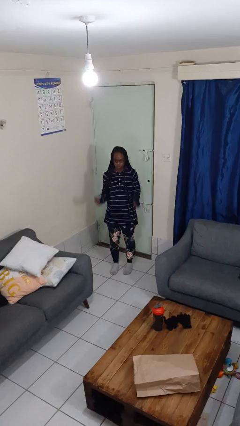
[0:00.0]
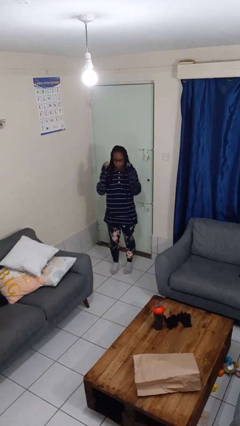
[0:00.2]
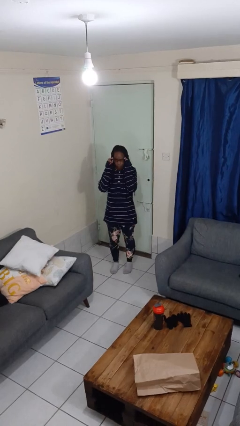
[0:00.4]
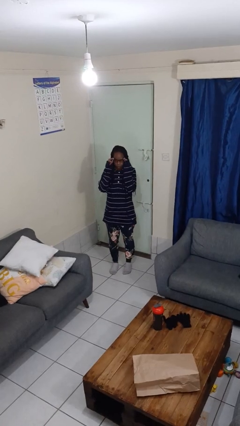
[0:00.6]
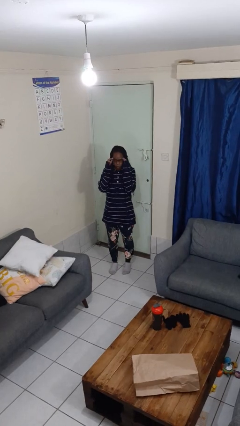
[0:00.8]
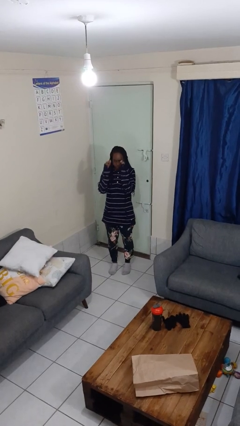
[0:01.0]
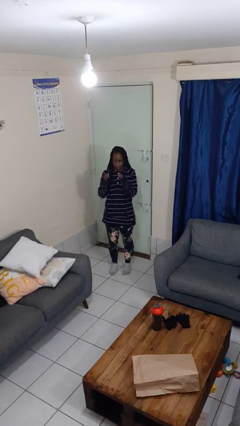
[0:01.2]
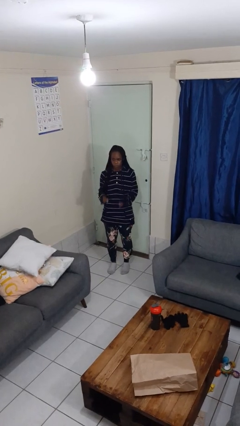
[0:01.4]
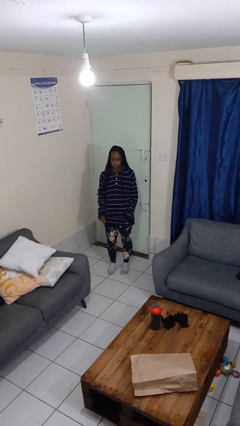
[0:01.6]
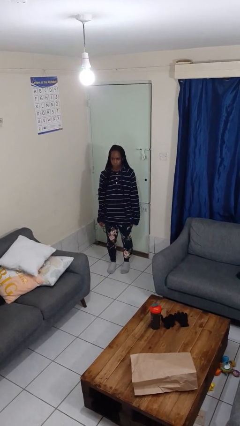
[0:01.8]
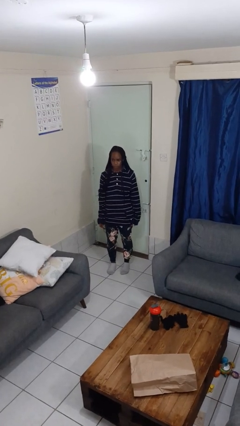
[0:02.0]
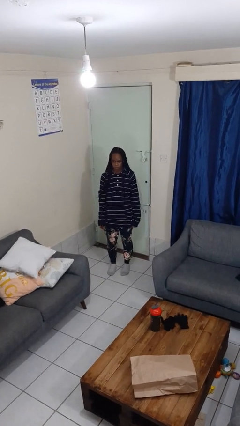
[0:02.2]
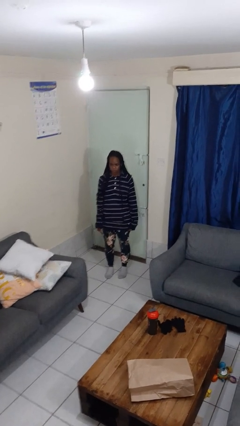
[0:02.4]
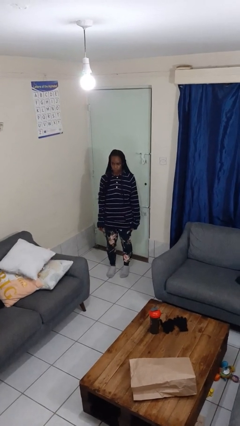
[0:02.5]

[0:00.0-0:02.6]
person takes off glasses

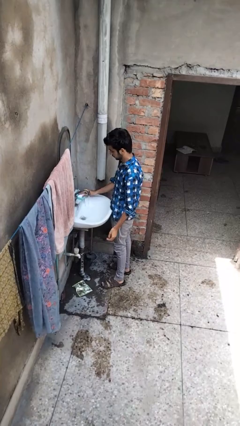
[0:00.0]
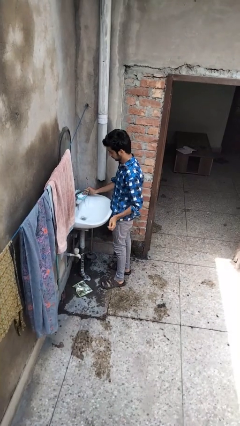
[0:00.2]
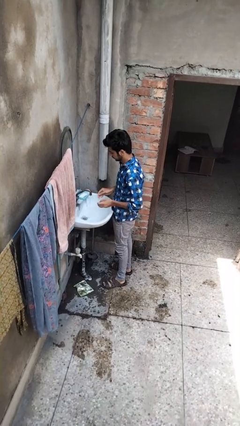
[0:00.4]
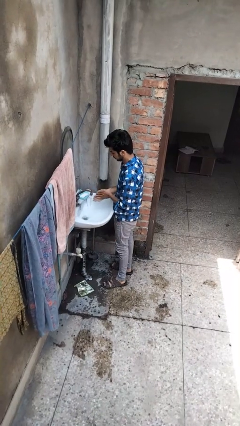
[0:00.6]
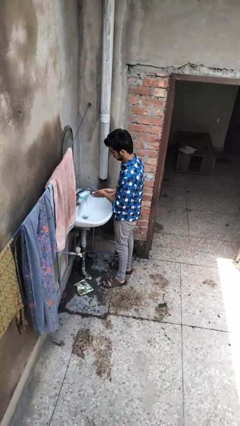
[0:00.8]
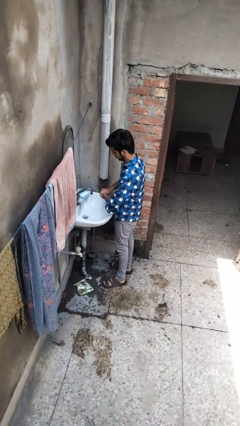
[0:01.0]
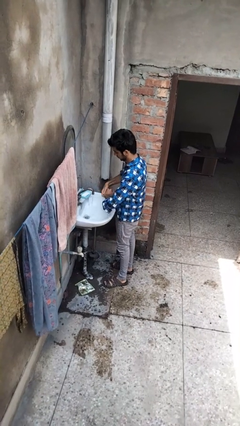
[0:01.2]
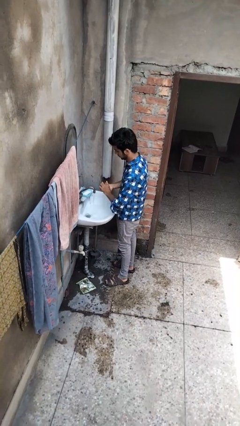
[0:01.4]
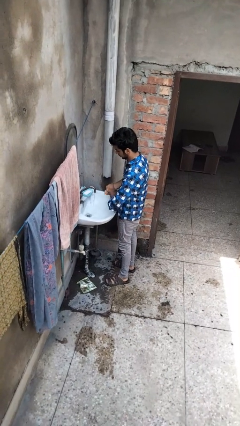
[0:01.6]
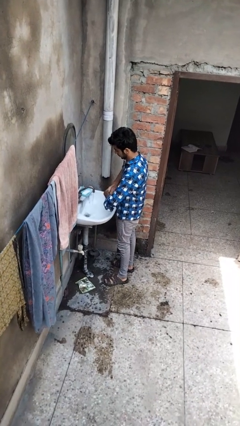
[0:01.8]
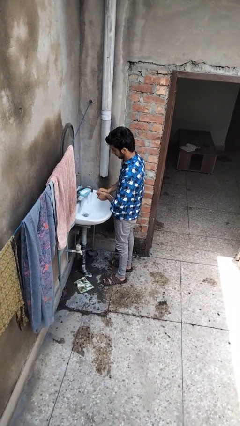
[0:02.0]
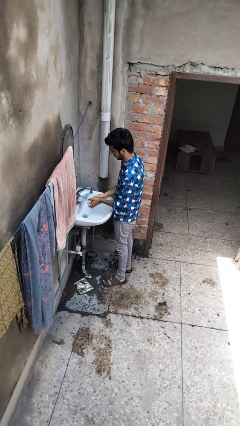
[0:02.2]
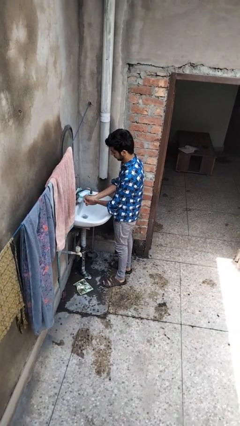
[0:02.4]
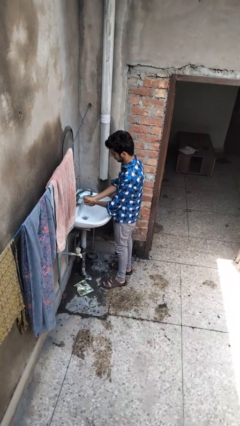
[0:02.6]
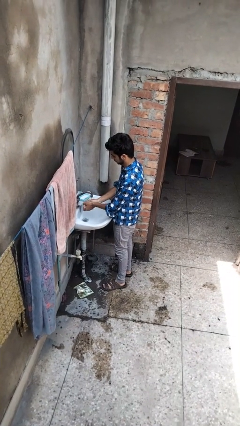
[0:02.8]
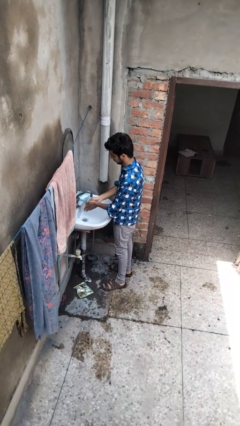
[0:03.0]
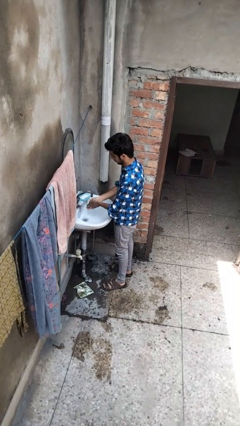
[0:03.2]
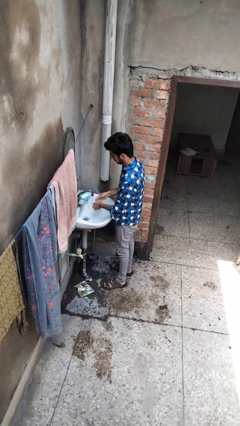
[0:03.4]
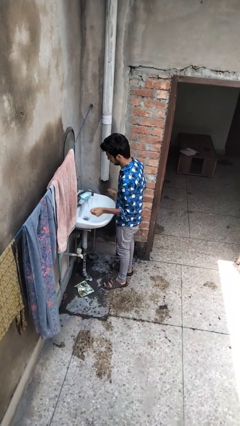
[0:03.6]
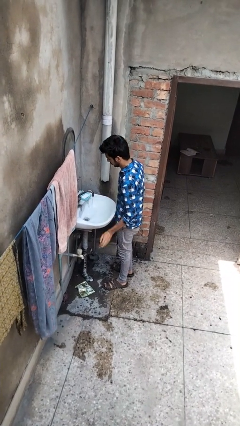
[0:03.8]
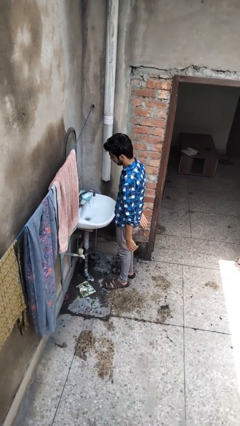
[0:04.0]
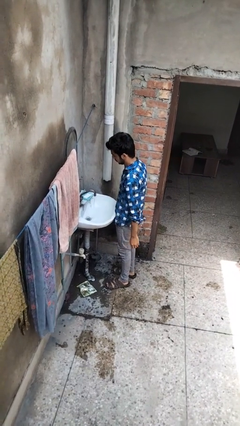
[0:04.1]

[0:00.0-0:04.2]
person washes hands

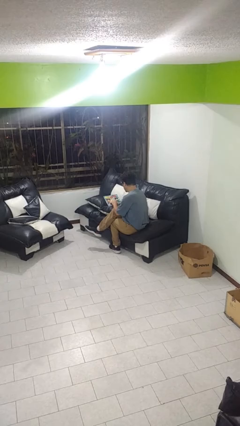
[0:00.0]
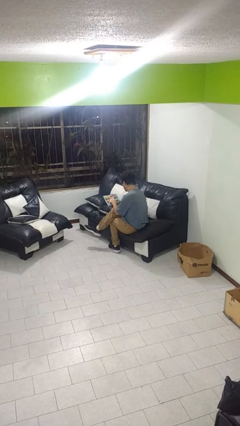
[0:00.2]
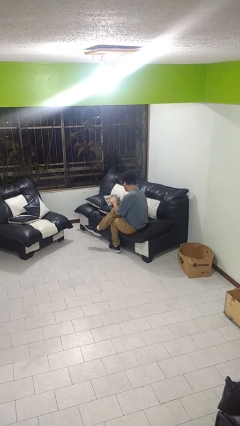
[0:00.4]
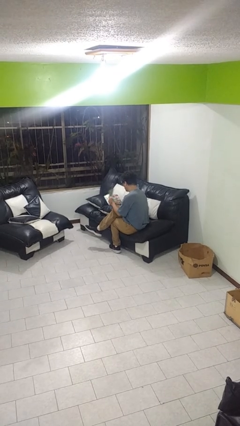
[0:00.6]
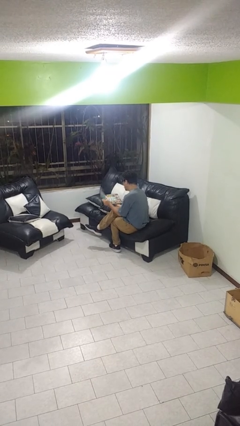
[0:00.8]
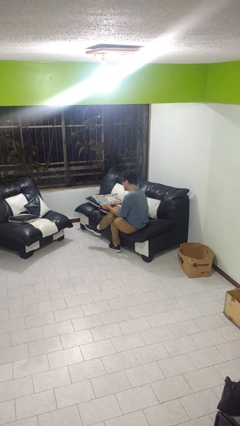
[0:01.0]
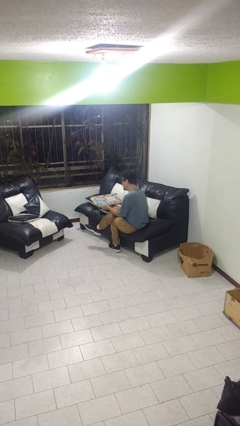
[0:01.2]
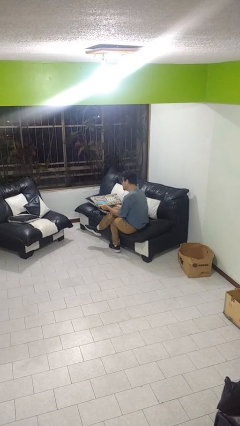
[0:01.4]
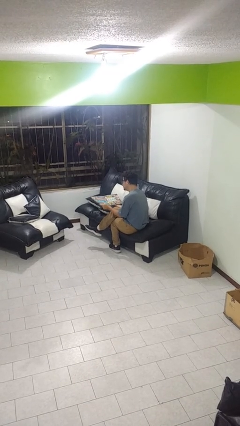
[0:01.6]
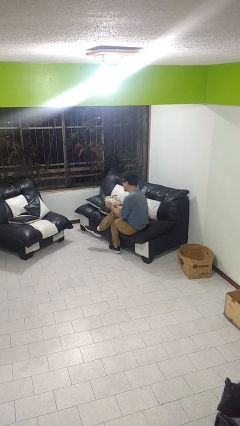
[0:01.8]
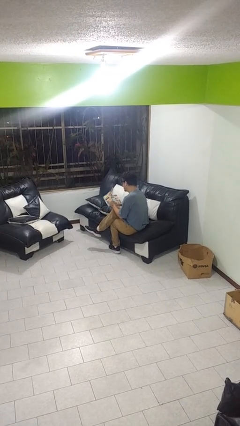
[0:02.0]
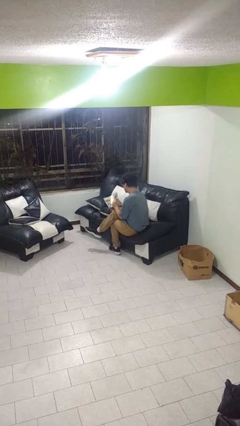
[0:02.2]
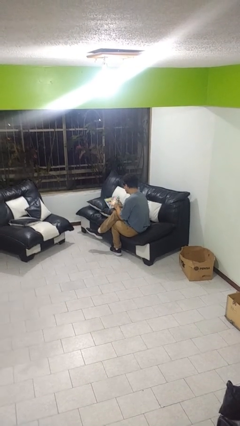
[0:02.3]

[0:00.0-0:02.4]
person reads magazine

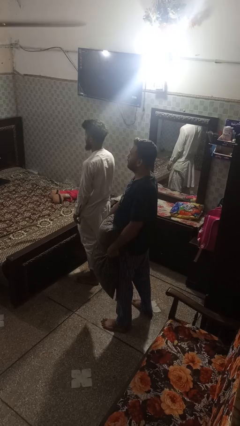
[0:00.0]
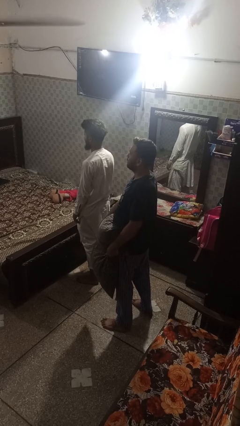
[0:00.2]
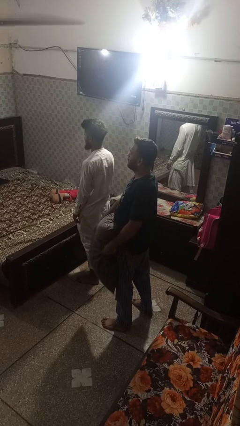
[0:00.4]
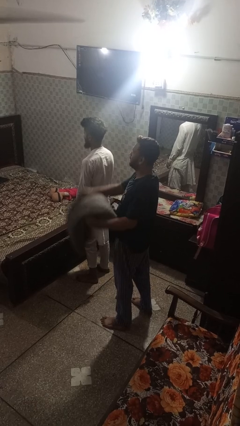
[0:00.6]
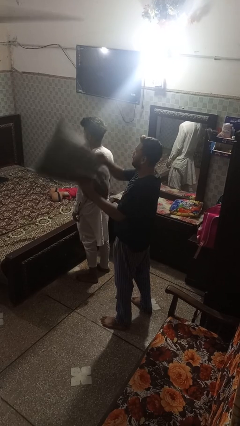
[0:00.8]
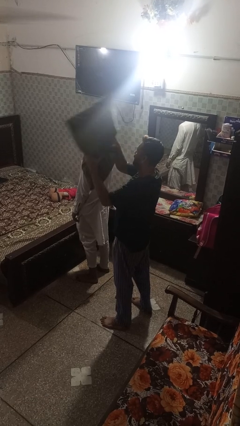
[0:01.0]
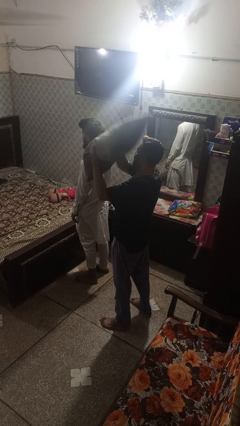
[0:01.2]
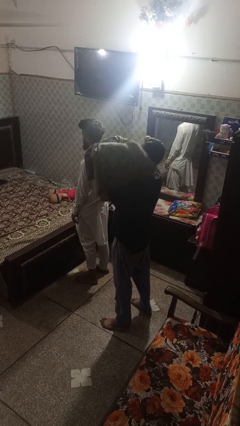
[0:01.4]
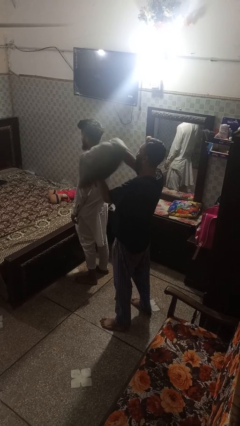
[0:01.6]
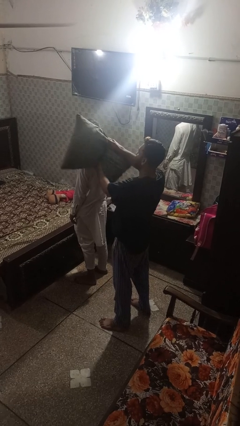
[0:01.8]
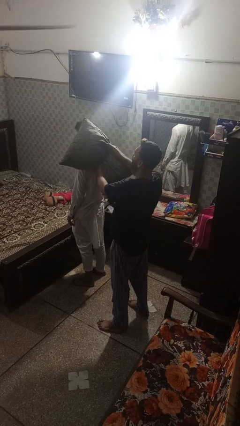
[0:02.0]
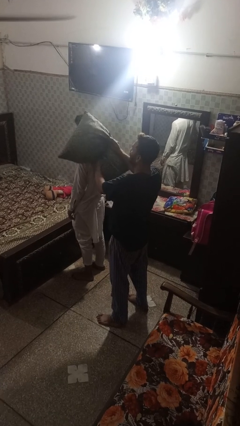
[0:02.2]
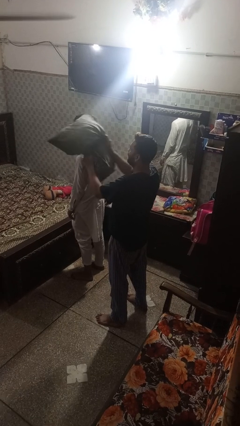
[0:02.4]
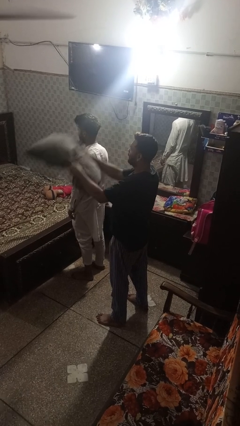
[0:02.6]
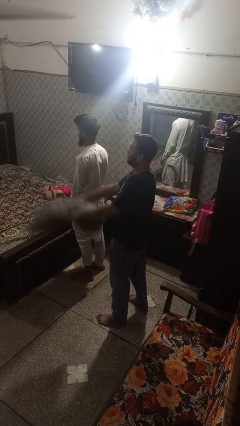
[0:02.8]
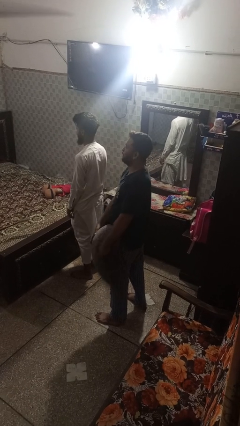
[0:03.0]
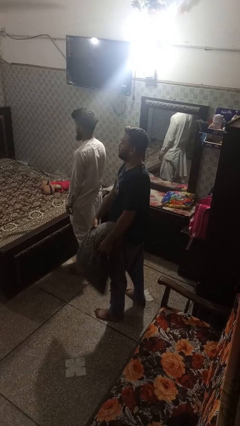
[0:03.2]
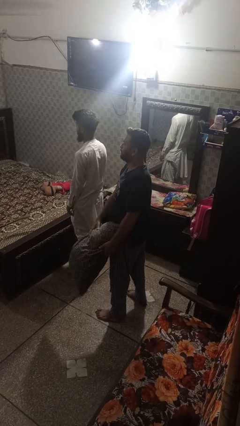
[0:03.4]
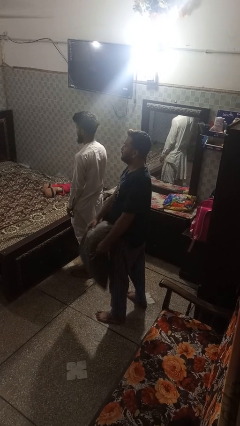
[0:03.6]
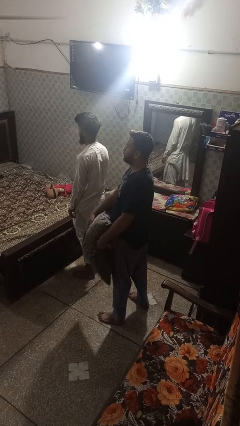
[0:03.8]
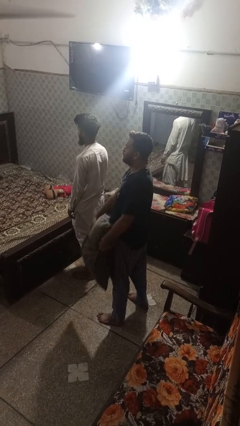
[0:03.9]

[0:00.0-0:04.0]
person hits person with pillow

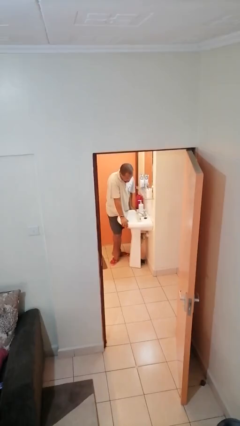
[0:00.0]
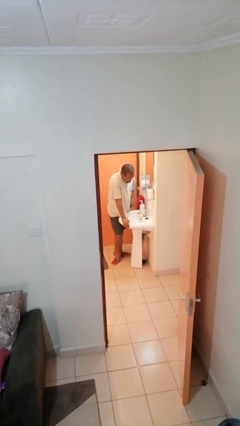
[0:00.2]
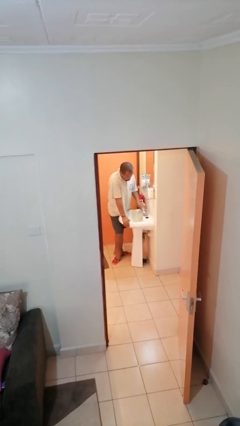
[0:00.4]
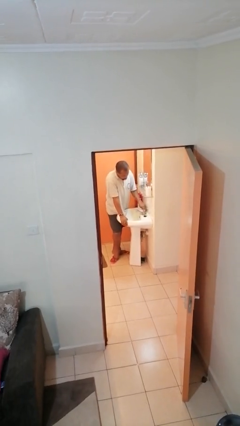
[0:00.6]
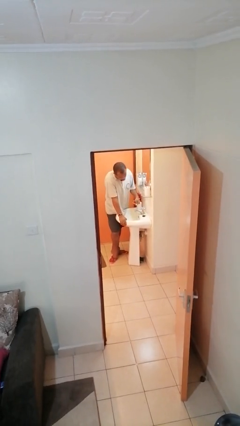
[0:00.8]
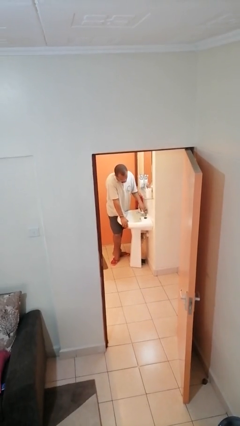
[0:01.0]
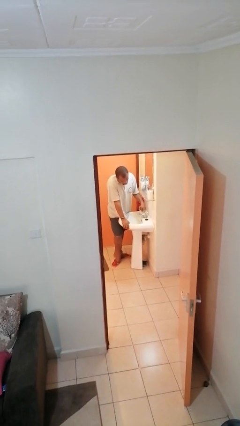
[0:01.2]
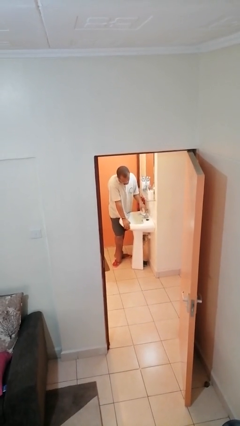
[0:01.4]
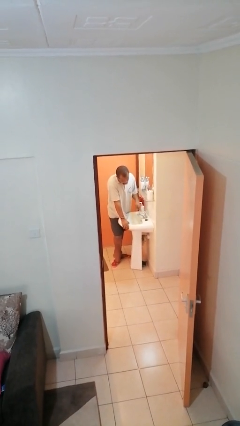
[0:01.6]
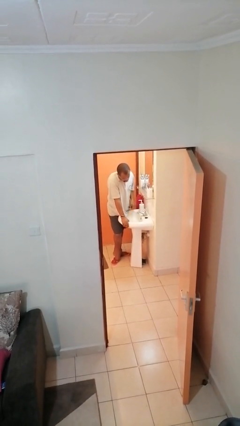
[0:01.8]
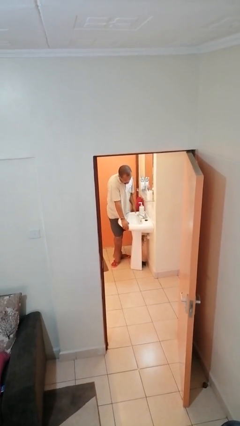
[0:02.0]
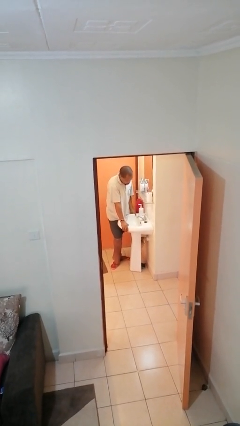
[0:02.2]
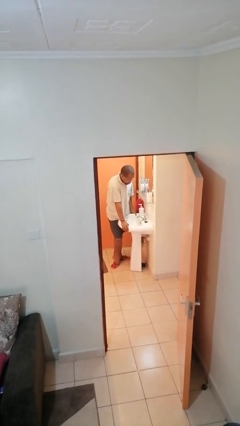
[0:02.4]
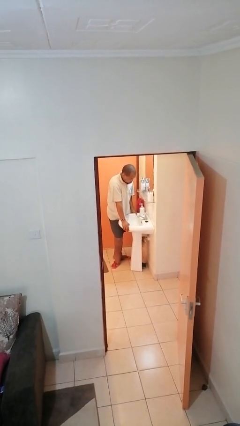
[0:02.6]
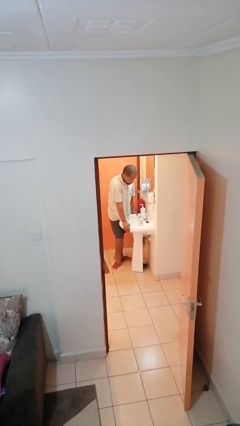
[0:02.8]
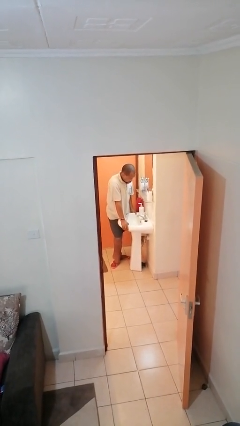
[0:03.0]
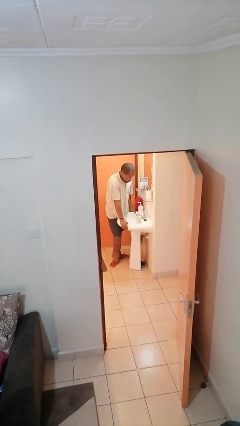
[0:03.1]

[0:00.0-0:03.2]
person turns on faucet

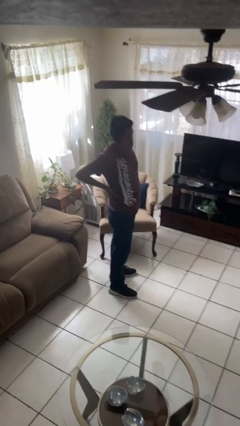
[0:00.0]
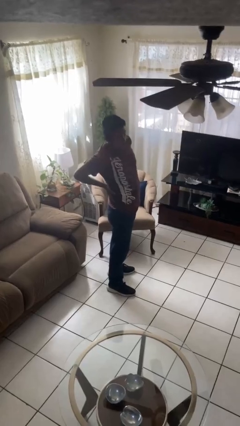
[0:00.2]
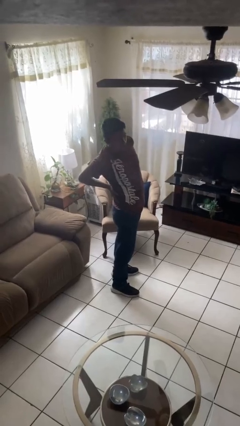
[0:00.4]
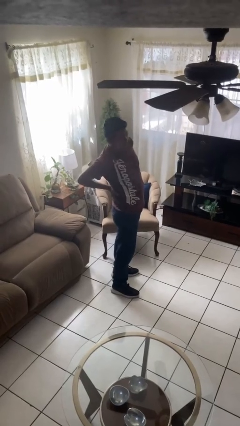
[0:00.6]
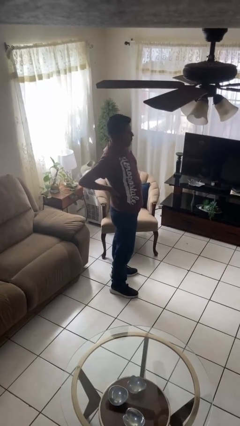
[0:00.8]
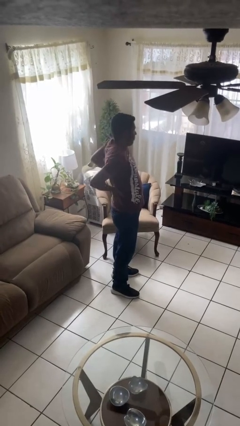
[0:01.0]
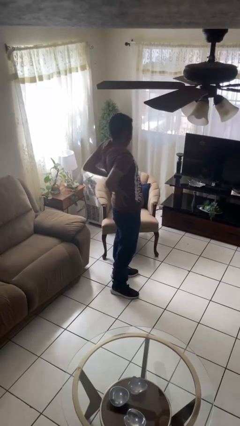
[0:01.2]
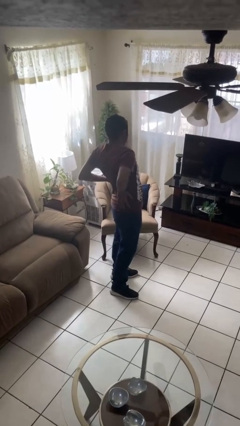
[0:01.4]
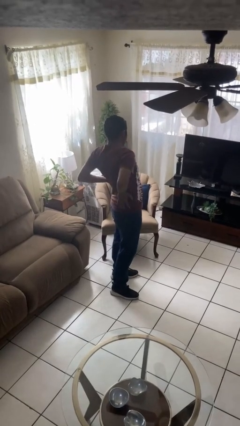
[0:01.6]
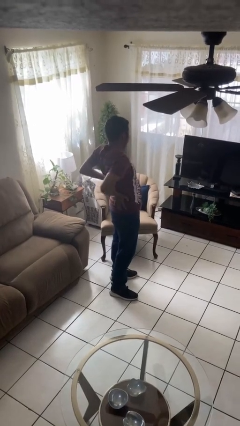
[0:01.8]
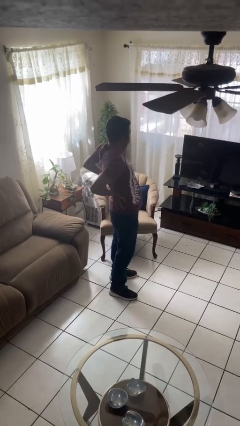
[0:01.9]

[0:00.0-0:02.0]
person stretches back
